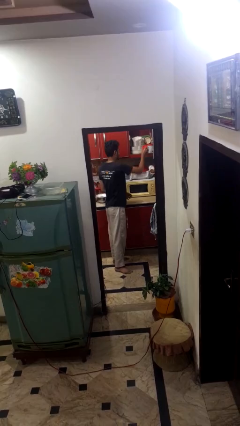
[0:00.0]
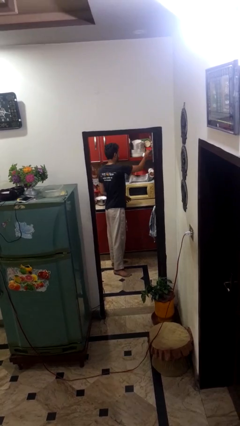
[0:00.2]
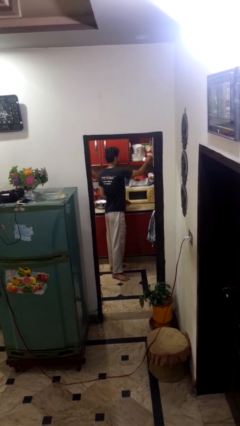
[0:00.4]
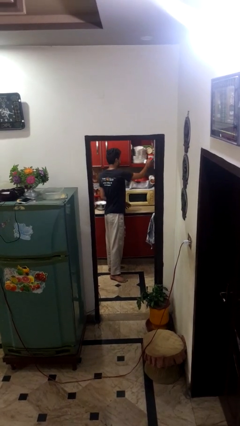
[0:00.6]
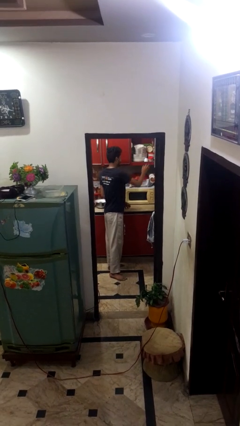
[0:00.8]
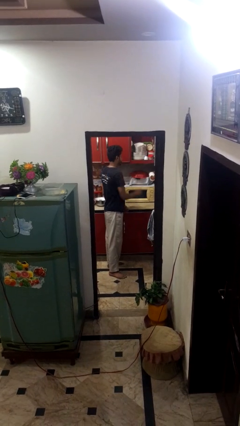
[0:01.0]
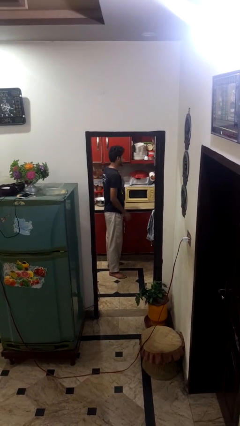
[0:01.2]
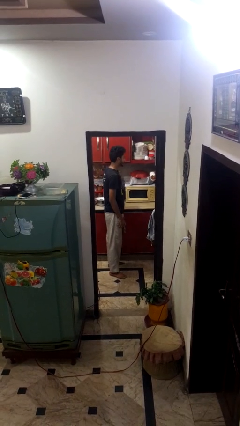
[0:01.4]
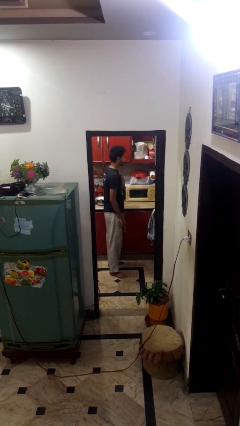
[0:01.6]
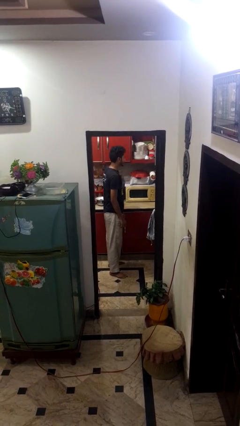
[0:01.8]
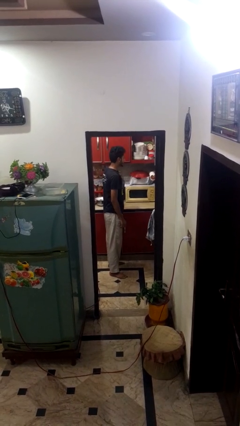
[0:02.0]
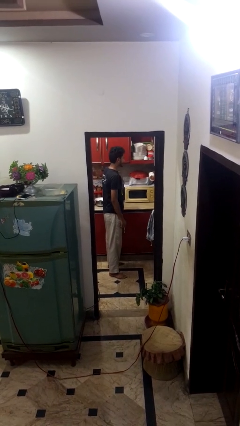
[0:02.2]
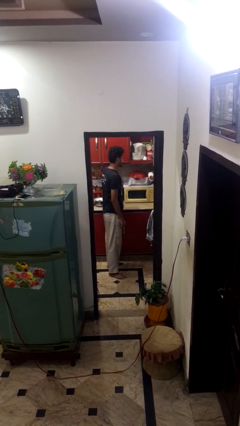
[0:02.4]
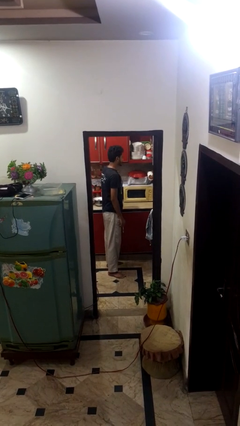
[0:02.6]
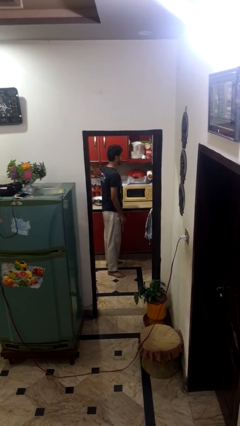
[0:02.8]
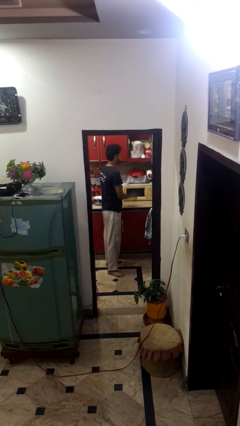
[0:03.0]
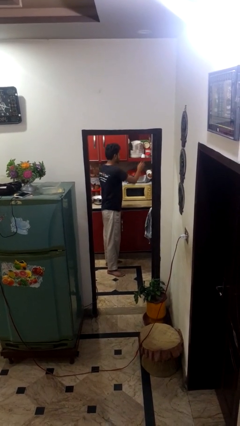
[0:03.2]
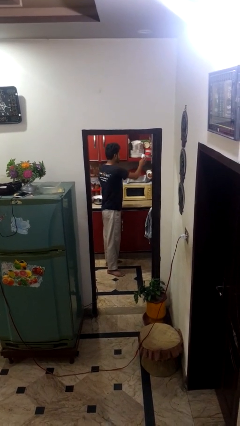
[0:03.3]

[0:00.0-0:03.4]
person puts down object into cabinet

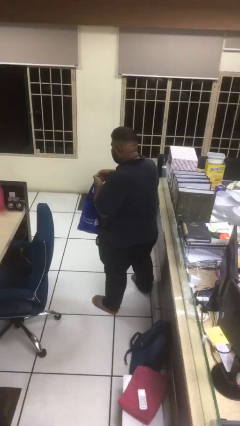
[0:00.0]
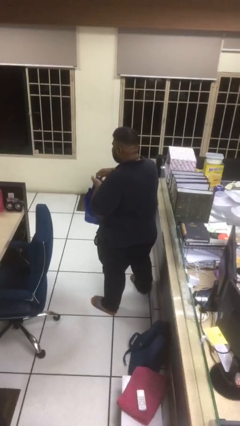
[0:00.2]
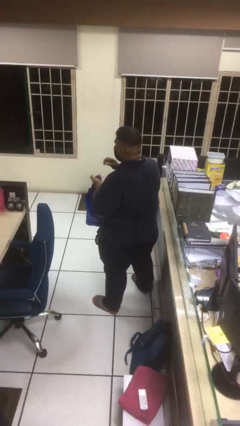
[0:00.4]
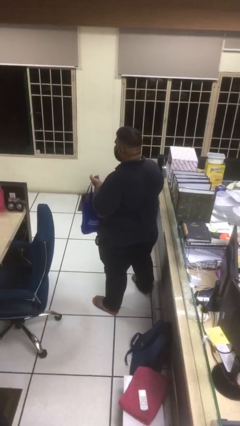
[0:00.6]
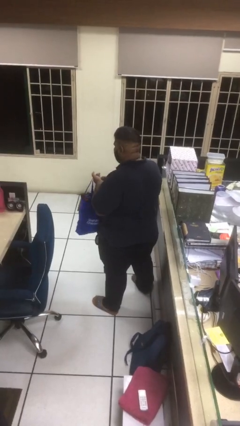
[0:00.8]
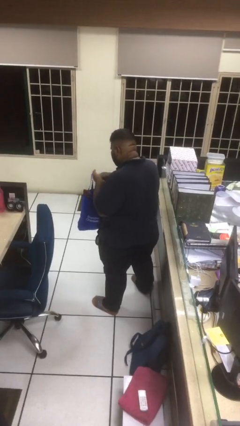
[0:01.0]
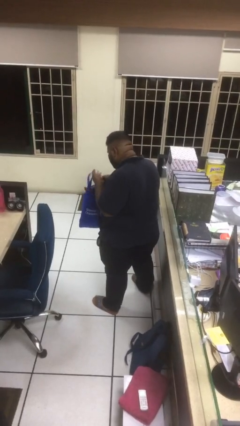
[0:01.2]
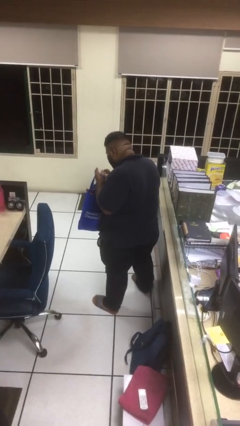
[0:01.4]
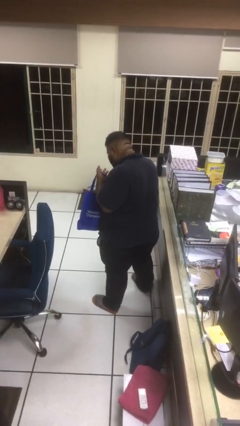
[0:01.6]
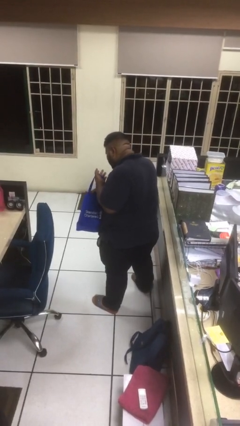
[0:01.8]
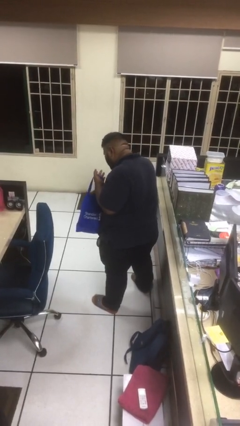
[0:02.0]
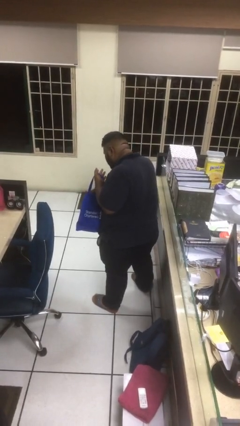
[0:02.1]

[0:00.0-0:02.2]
person searches in bag

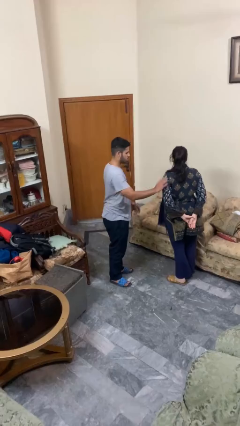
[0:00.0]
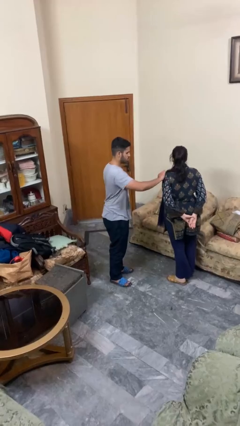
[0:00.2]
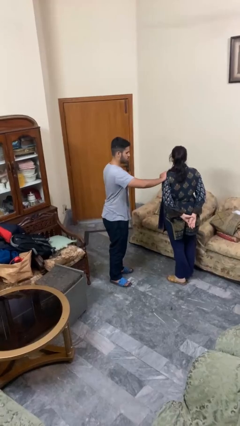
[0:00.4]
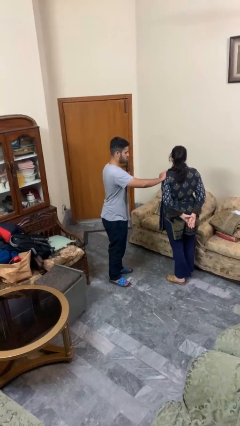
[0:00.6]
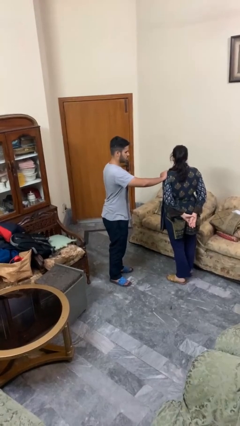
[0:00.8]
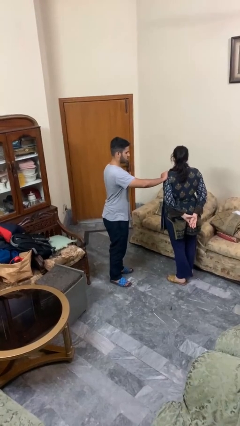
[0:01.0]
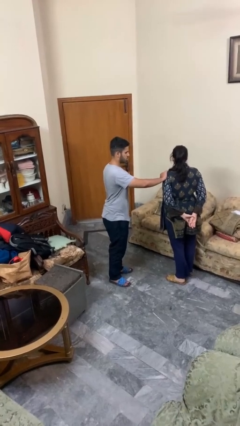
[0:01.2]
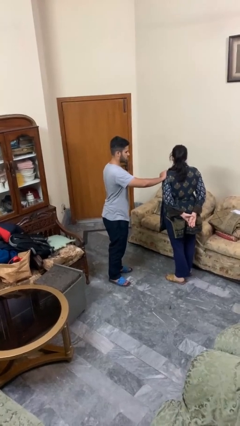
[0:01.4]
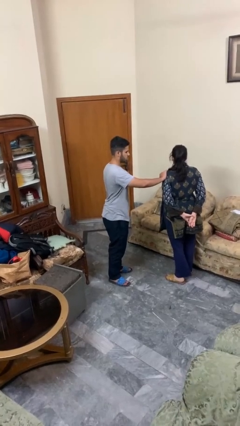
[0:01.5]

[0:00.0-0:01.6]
person grabs person by shoulder

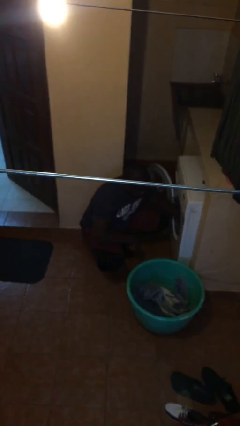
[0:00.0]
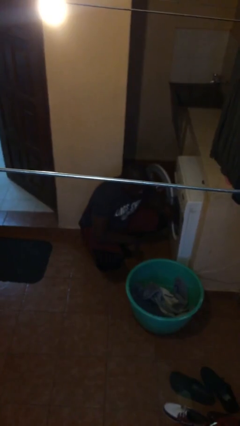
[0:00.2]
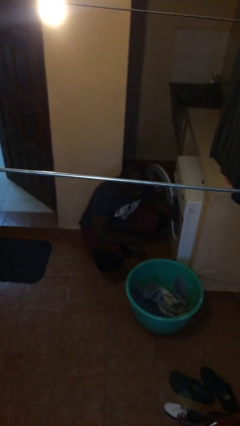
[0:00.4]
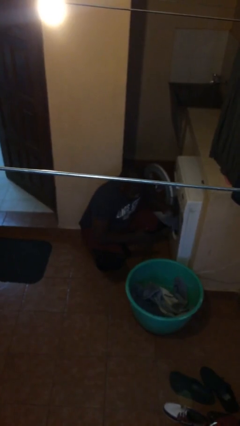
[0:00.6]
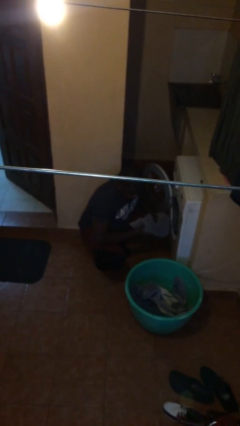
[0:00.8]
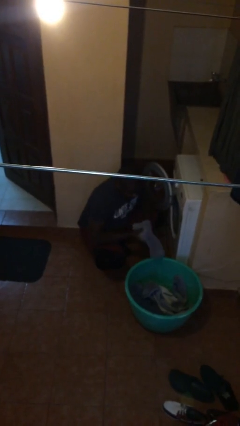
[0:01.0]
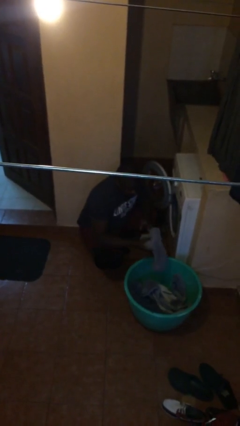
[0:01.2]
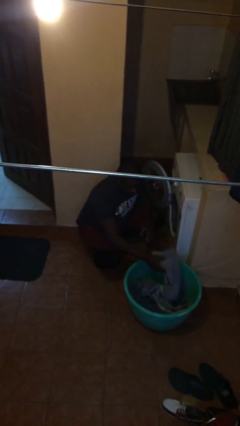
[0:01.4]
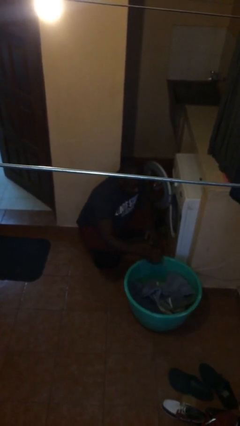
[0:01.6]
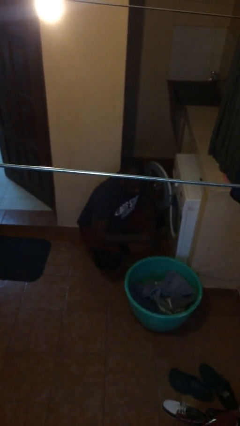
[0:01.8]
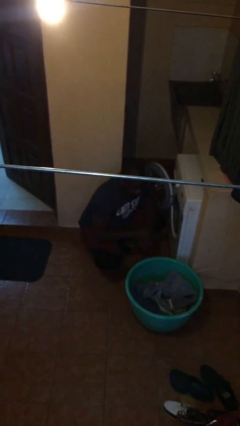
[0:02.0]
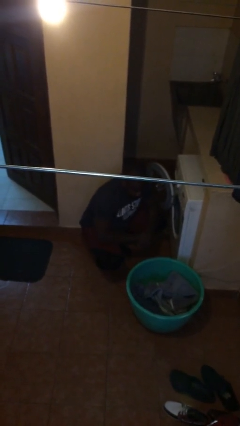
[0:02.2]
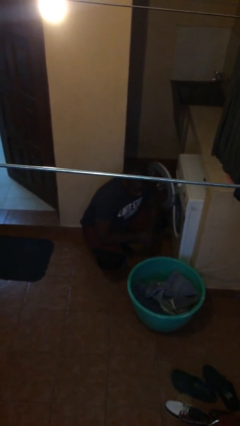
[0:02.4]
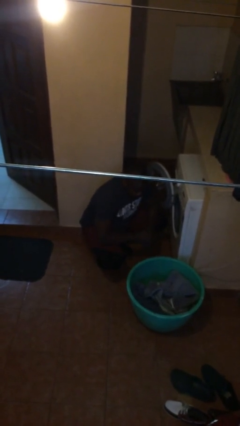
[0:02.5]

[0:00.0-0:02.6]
person unloads dryer

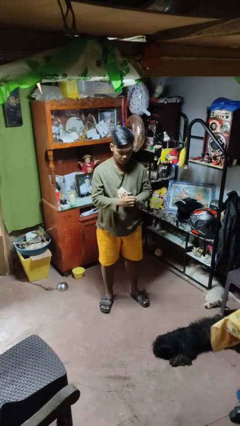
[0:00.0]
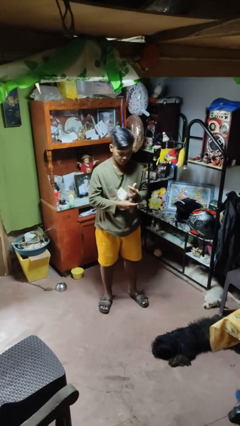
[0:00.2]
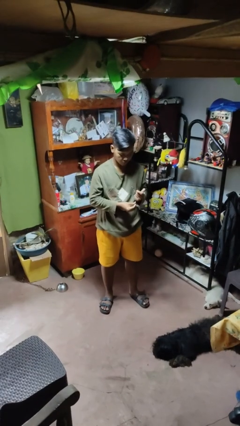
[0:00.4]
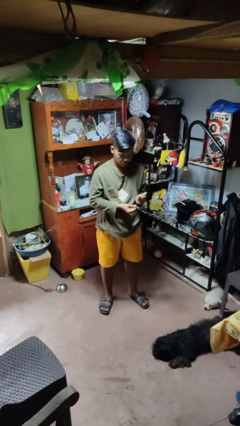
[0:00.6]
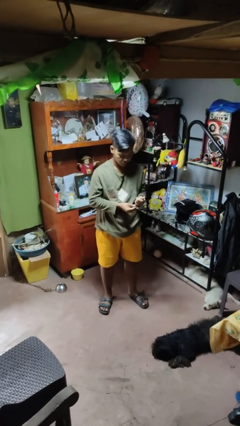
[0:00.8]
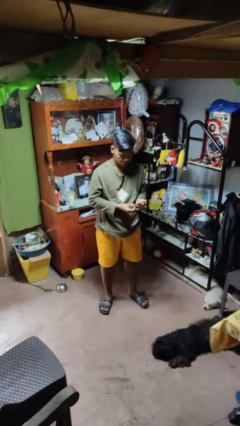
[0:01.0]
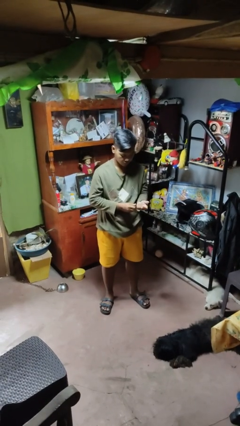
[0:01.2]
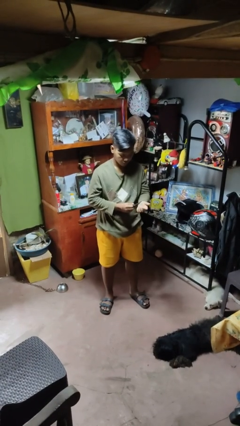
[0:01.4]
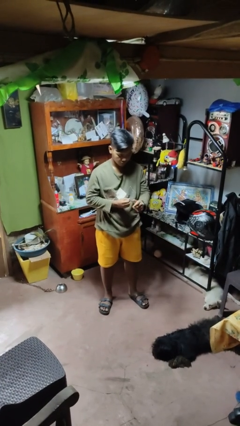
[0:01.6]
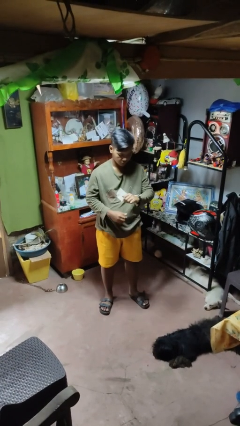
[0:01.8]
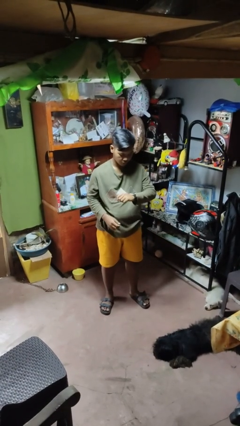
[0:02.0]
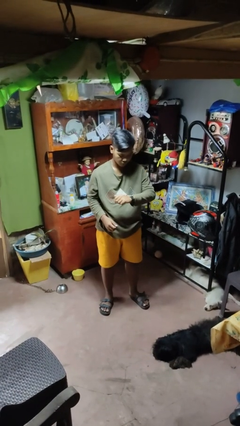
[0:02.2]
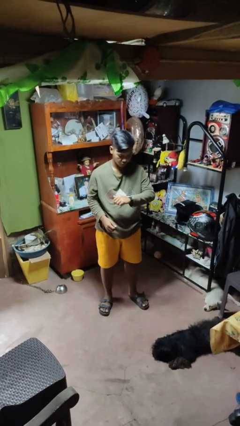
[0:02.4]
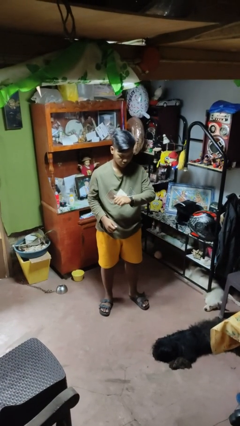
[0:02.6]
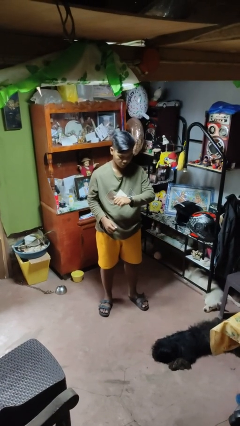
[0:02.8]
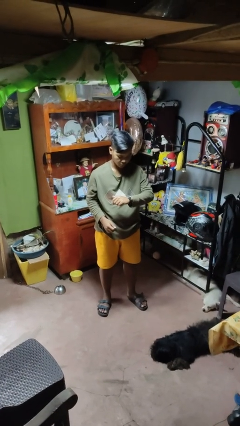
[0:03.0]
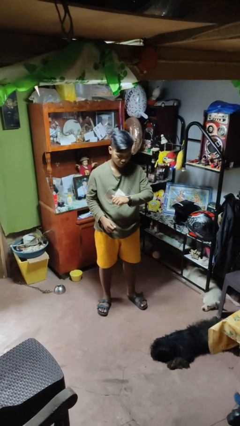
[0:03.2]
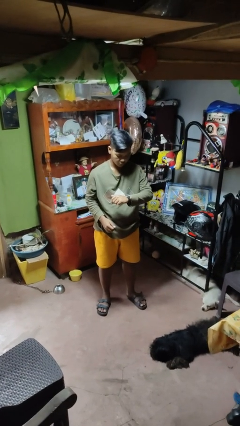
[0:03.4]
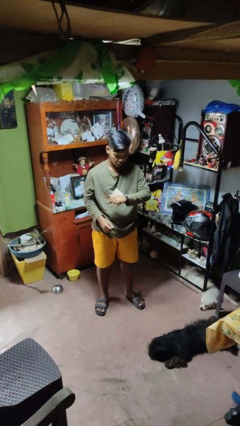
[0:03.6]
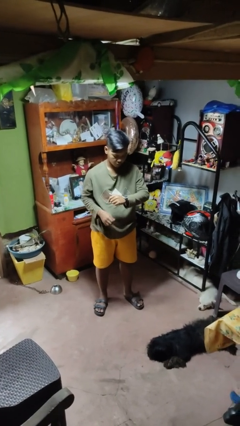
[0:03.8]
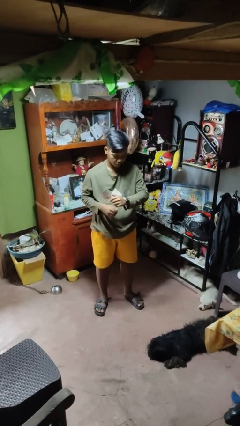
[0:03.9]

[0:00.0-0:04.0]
person puts on wristwatch

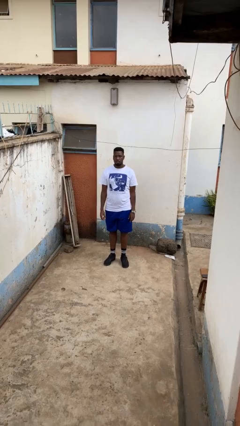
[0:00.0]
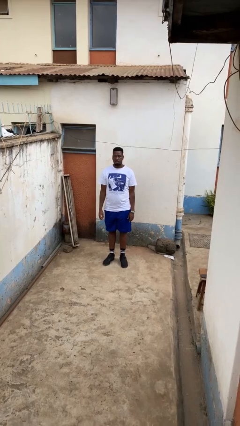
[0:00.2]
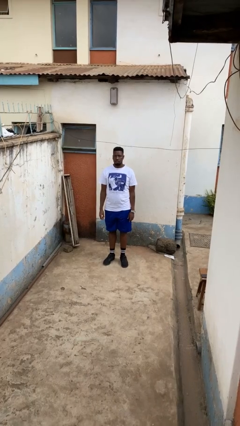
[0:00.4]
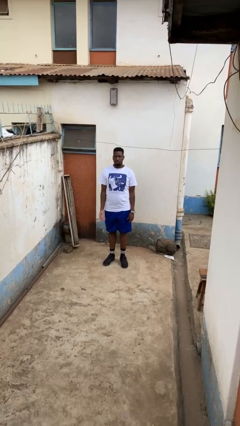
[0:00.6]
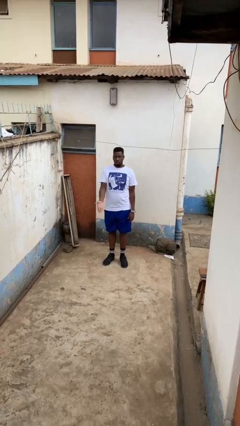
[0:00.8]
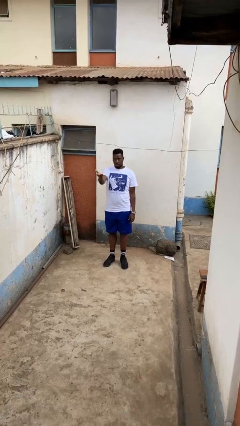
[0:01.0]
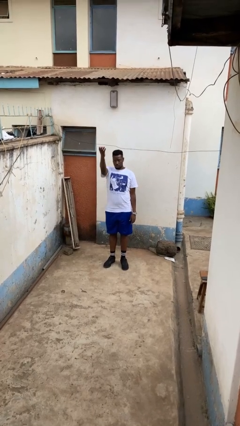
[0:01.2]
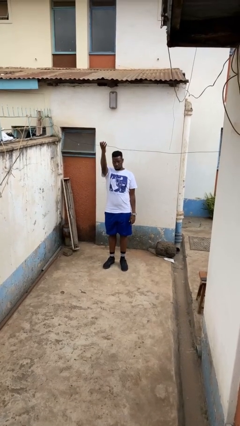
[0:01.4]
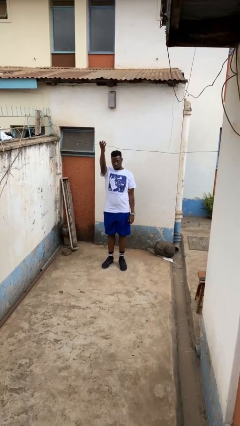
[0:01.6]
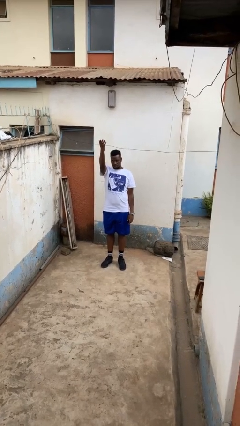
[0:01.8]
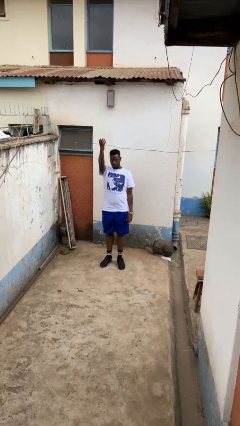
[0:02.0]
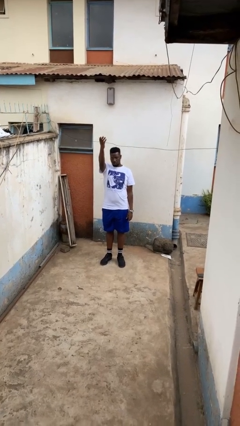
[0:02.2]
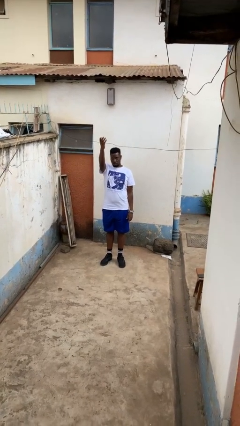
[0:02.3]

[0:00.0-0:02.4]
person gestures swipe up

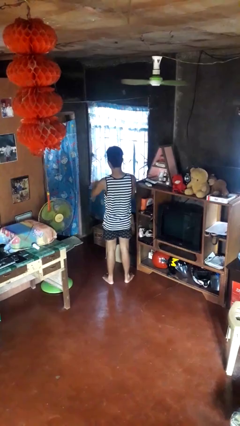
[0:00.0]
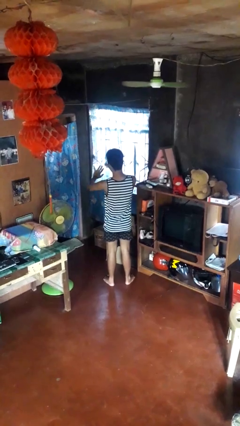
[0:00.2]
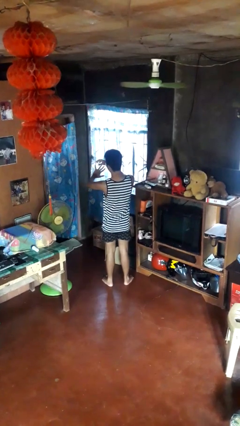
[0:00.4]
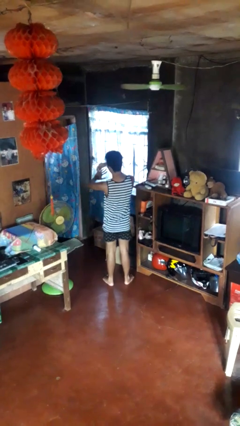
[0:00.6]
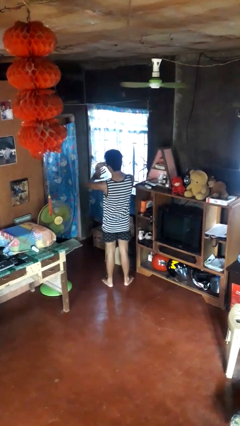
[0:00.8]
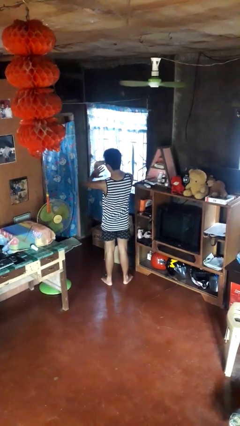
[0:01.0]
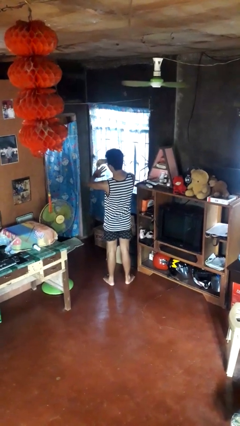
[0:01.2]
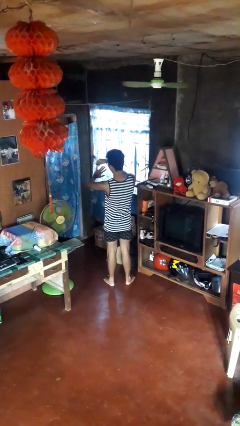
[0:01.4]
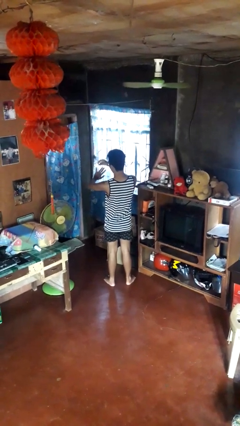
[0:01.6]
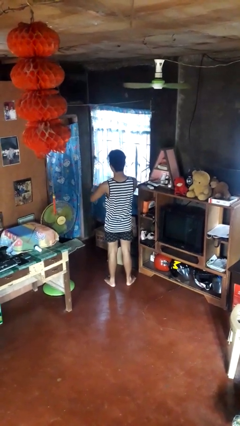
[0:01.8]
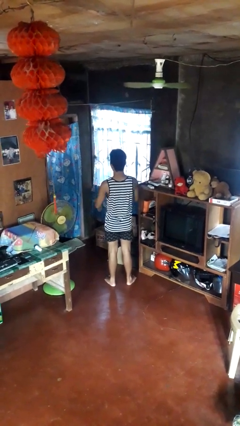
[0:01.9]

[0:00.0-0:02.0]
person takes off ring
